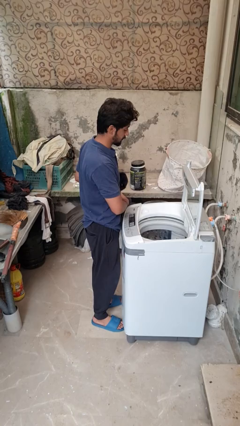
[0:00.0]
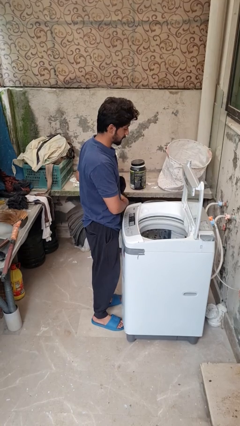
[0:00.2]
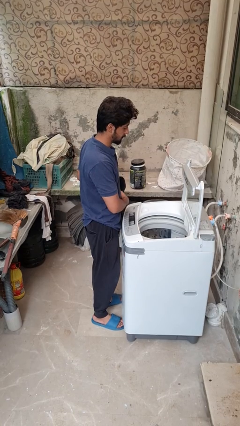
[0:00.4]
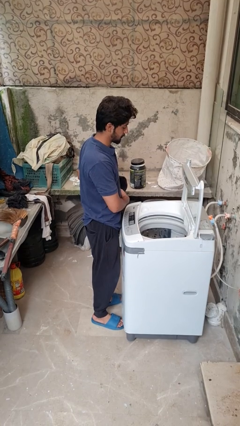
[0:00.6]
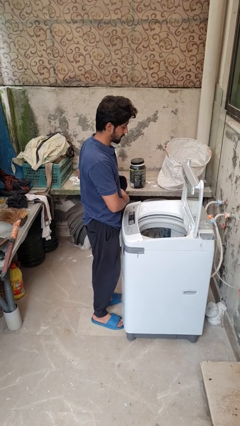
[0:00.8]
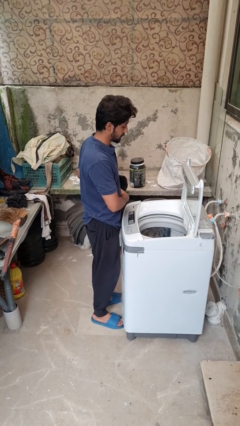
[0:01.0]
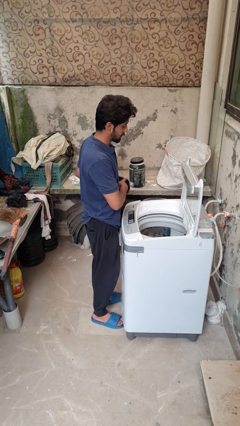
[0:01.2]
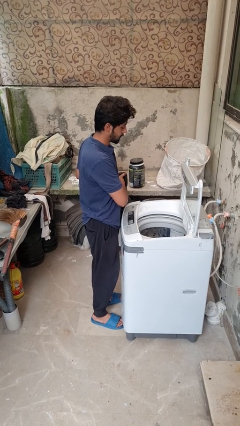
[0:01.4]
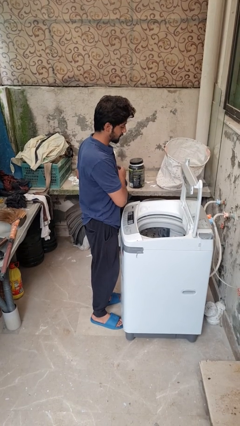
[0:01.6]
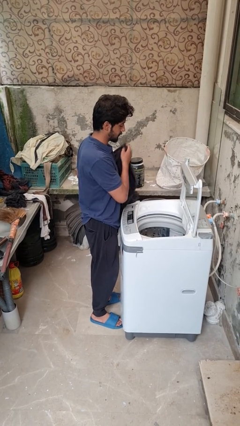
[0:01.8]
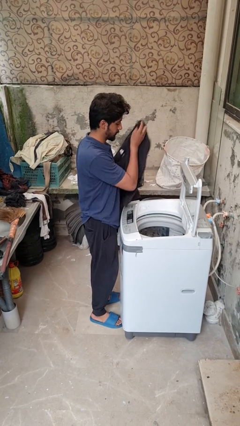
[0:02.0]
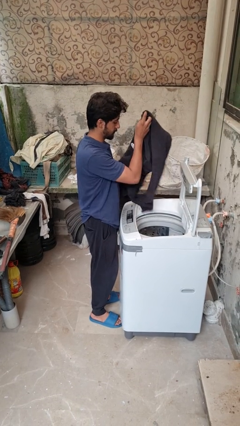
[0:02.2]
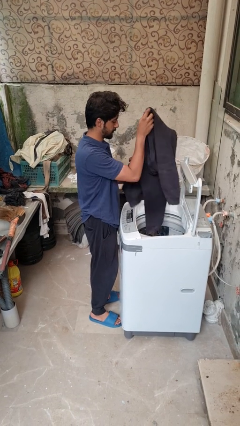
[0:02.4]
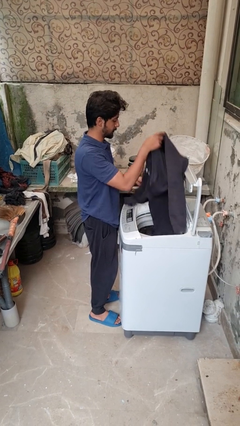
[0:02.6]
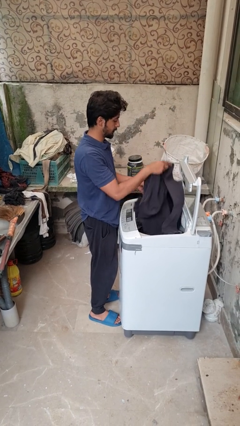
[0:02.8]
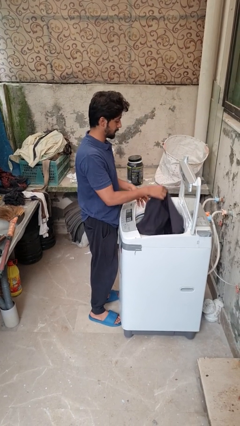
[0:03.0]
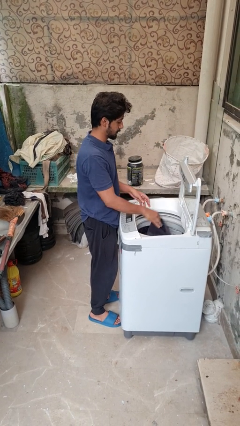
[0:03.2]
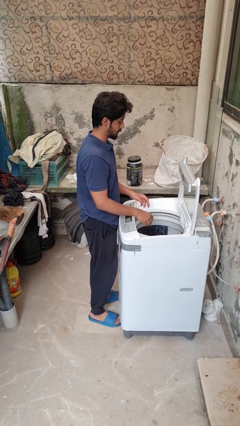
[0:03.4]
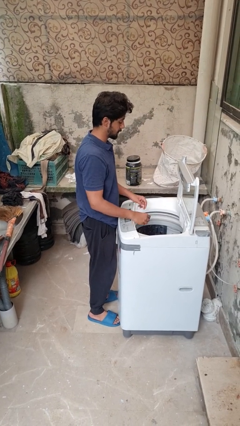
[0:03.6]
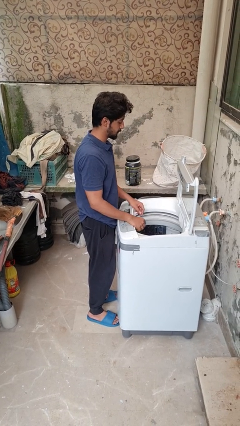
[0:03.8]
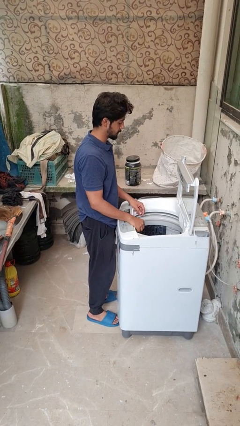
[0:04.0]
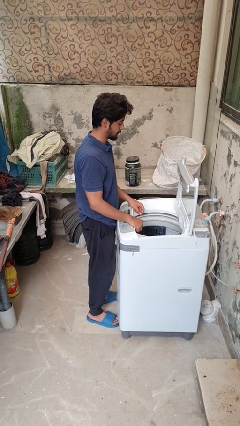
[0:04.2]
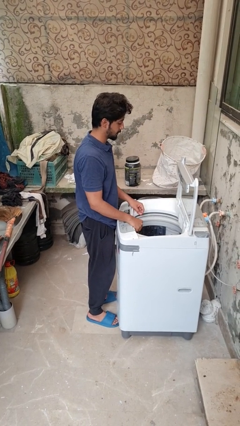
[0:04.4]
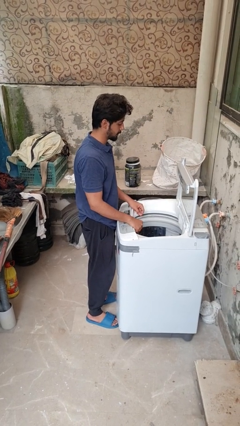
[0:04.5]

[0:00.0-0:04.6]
person loads dryer

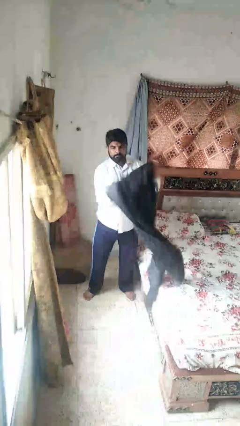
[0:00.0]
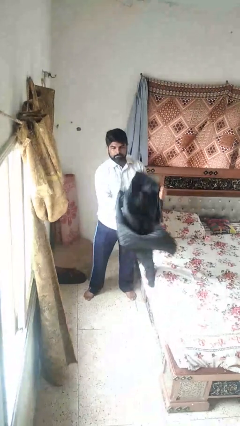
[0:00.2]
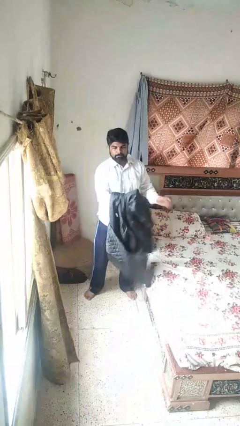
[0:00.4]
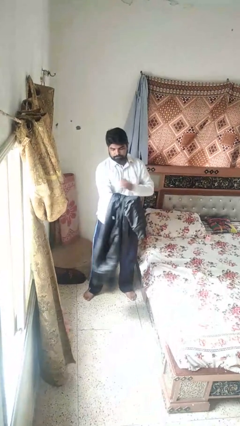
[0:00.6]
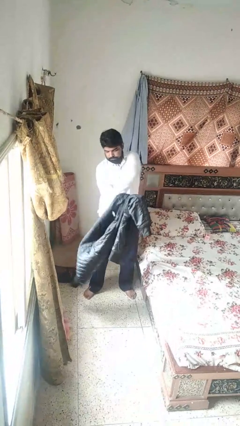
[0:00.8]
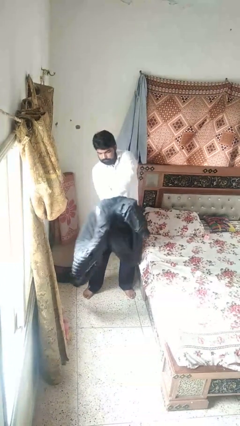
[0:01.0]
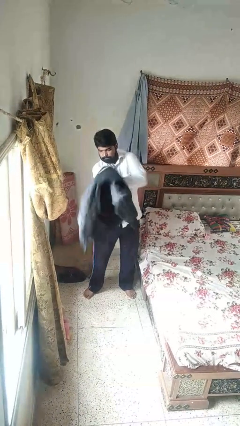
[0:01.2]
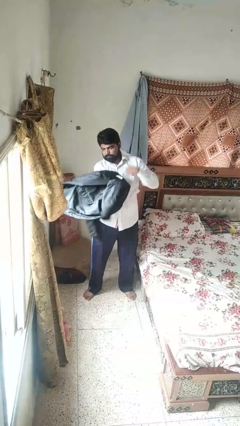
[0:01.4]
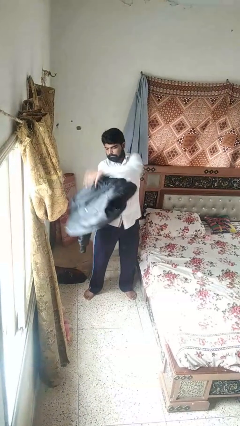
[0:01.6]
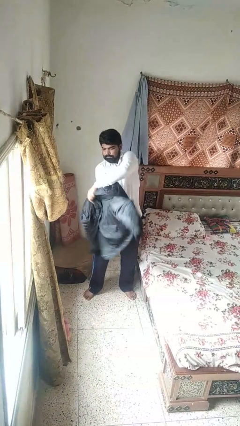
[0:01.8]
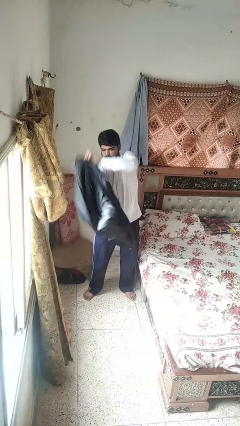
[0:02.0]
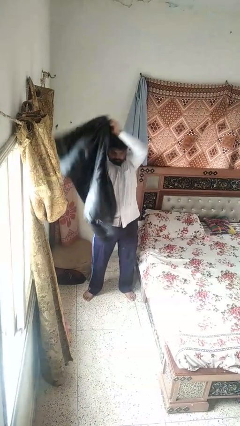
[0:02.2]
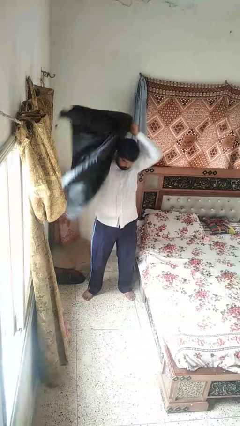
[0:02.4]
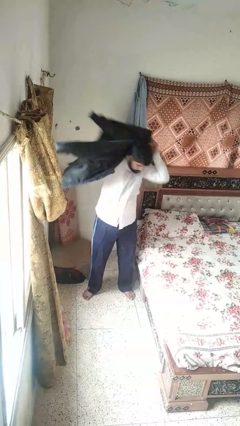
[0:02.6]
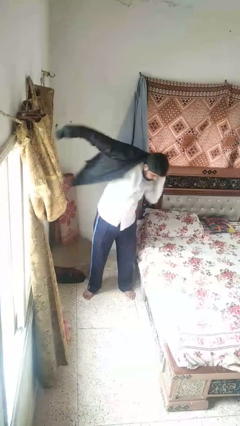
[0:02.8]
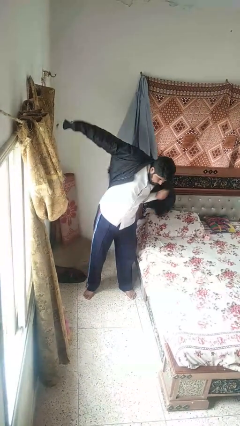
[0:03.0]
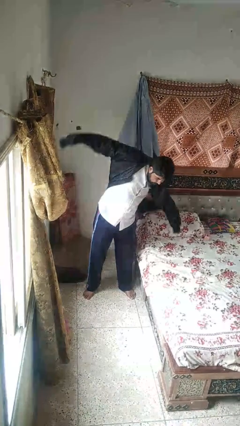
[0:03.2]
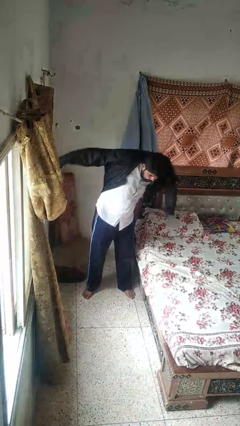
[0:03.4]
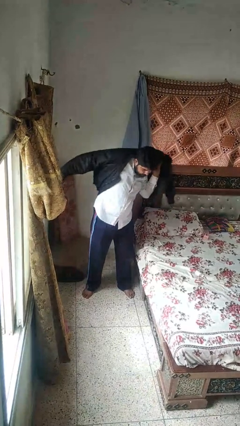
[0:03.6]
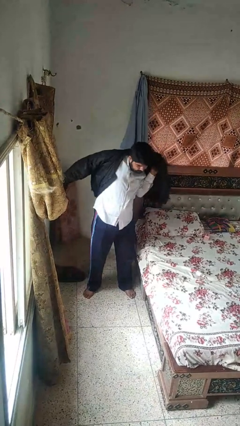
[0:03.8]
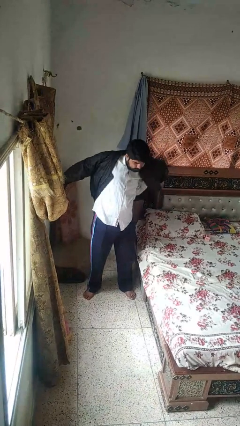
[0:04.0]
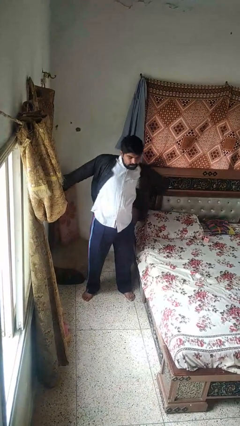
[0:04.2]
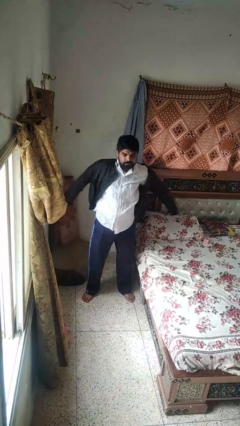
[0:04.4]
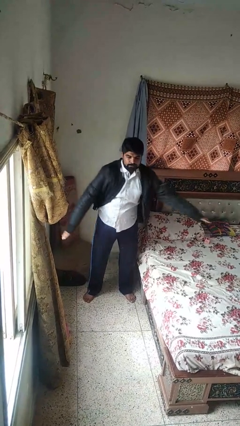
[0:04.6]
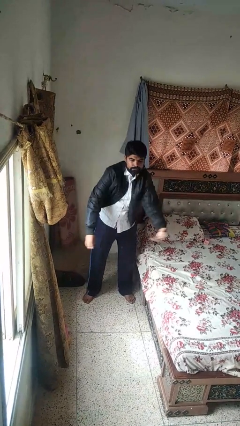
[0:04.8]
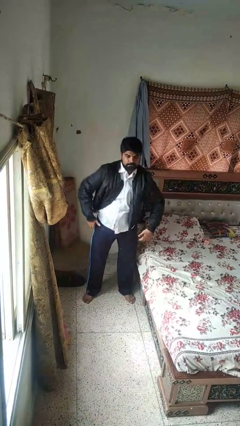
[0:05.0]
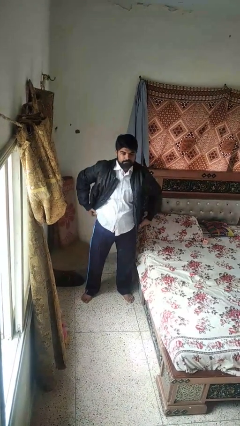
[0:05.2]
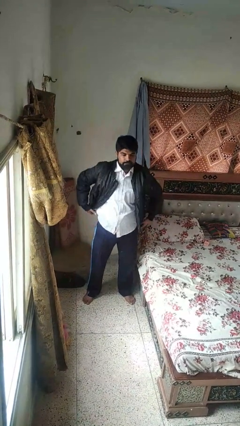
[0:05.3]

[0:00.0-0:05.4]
person puts on jacket

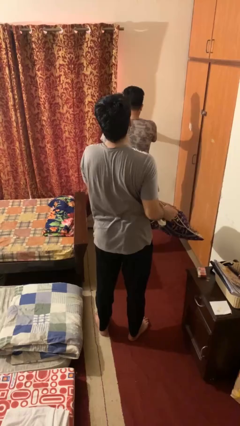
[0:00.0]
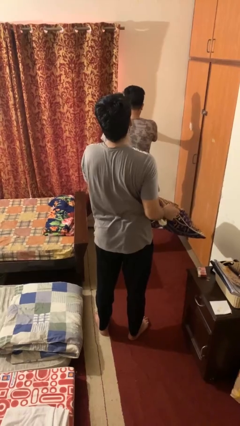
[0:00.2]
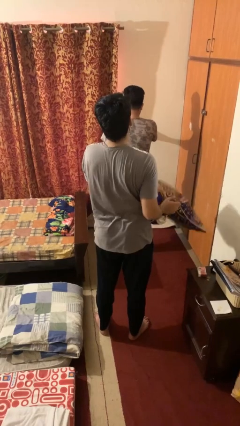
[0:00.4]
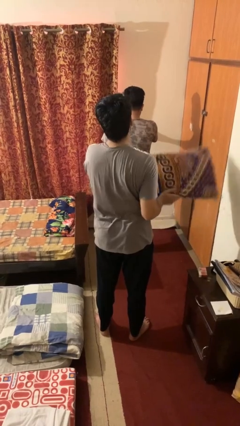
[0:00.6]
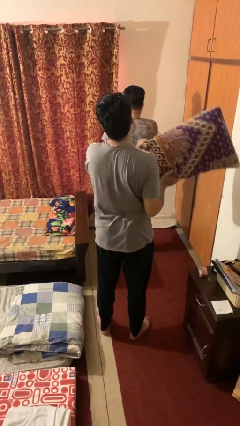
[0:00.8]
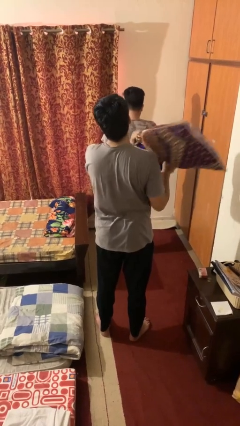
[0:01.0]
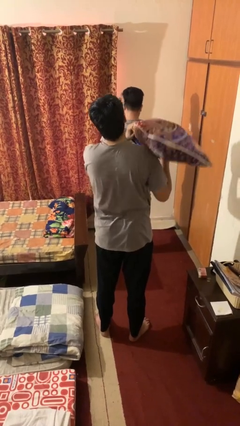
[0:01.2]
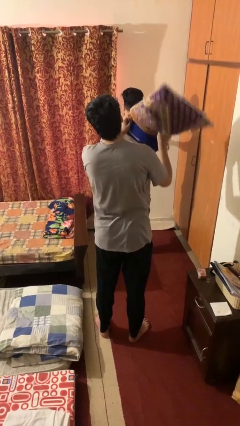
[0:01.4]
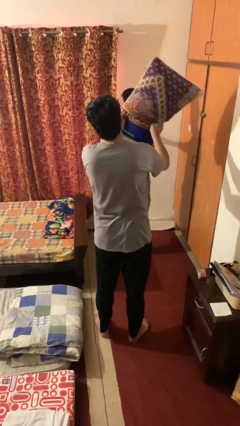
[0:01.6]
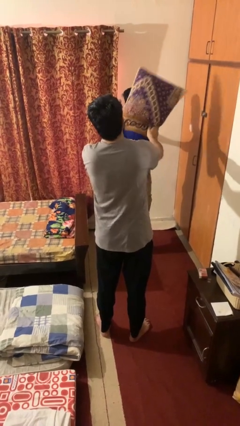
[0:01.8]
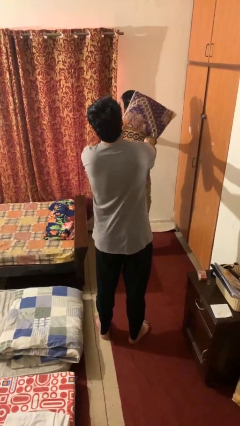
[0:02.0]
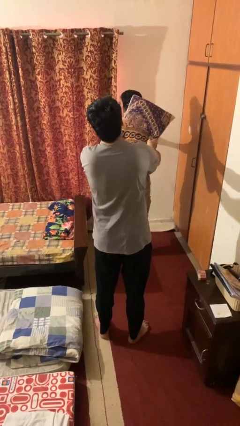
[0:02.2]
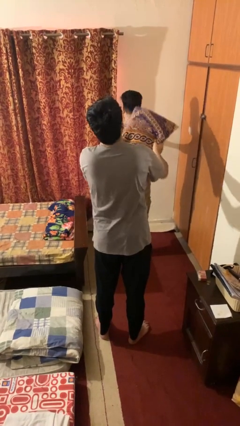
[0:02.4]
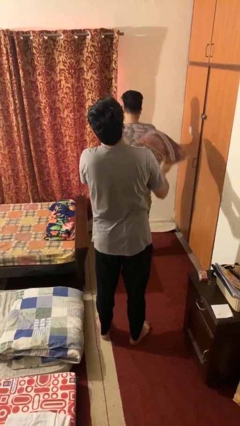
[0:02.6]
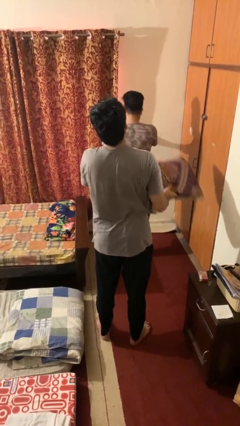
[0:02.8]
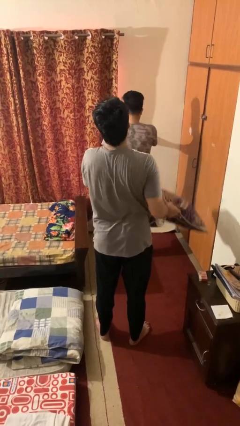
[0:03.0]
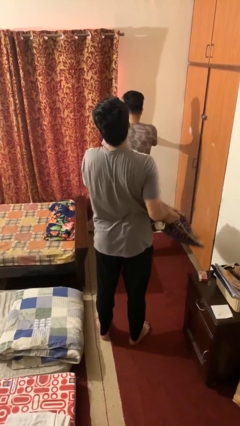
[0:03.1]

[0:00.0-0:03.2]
person hits person with pillow

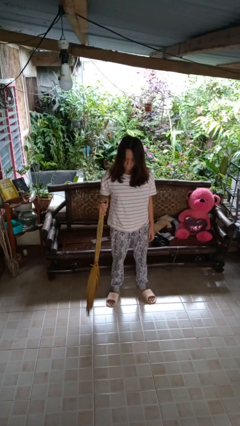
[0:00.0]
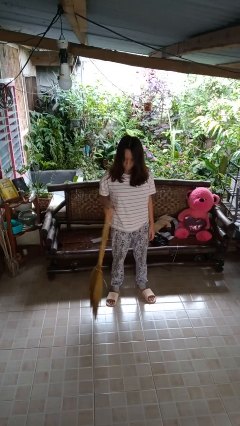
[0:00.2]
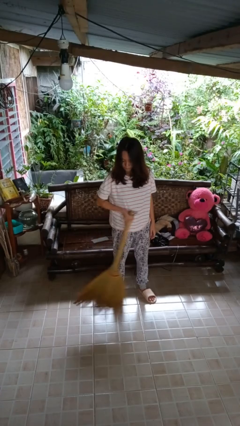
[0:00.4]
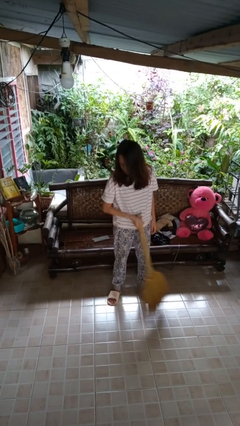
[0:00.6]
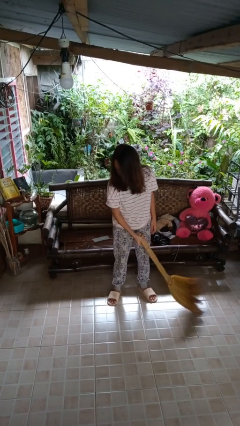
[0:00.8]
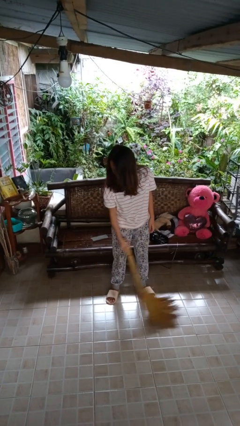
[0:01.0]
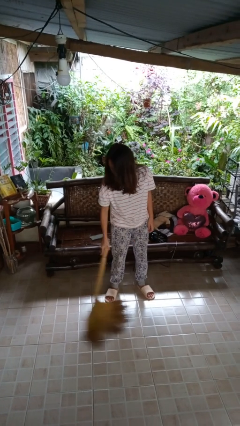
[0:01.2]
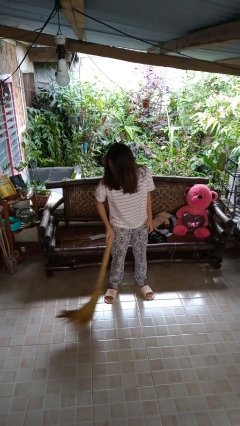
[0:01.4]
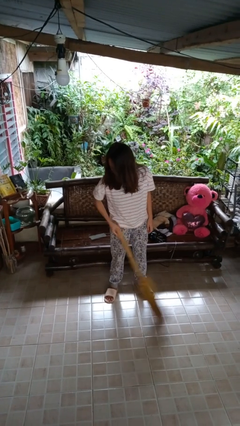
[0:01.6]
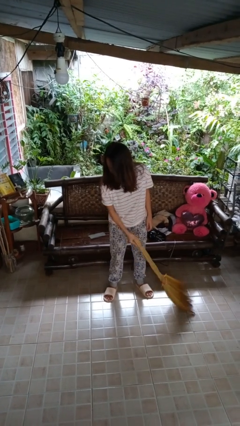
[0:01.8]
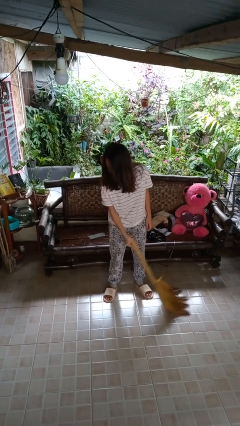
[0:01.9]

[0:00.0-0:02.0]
person sweeps floor

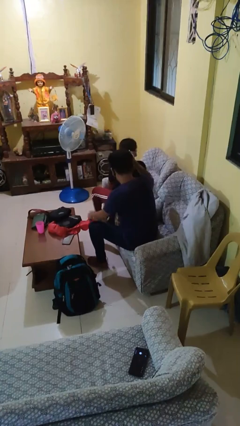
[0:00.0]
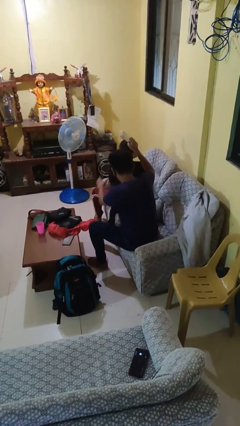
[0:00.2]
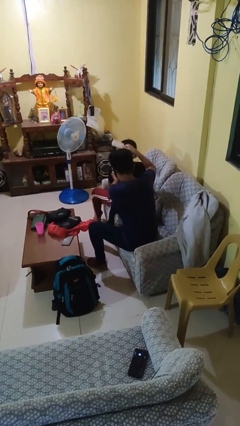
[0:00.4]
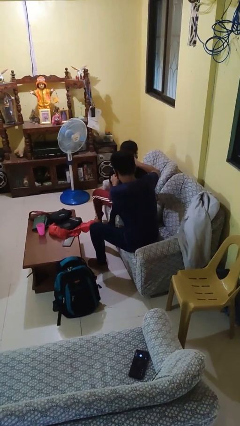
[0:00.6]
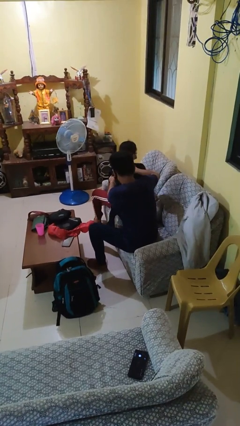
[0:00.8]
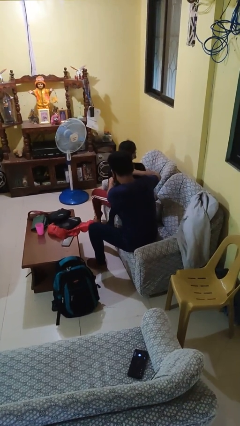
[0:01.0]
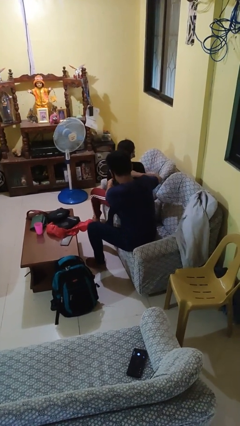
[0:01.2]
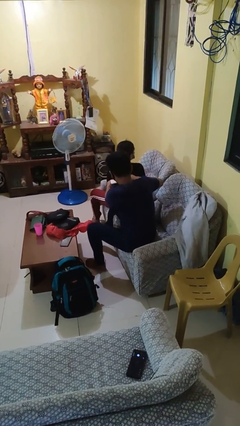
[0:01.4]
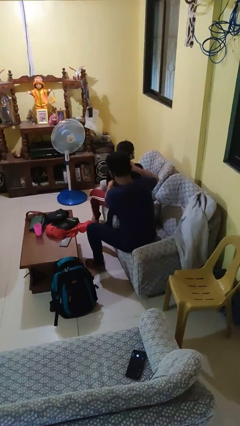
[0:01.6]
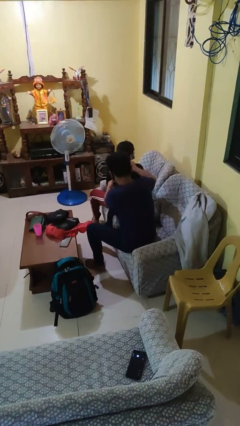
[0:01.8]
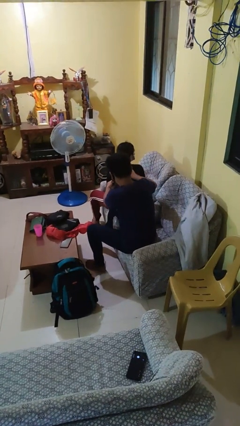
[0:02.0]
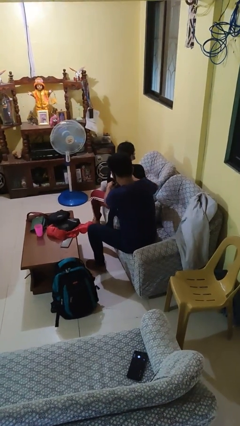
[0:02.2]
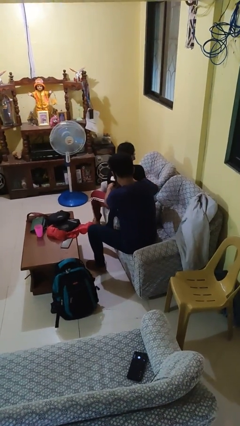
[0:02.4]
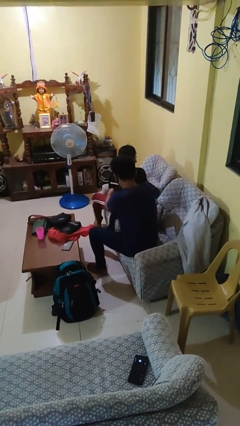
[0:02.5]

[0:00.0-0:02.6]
person brushes hair of person

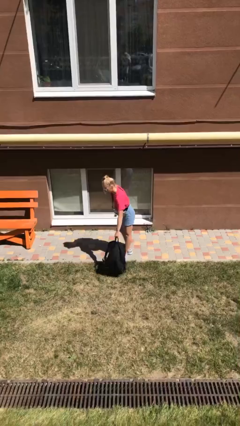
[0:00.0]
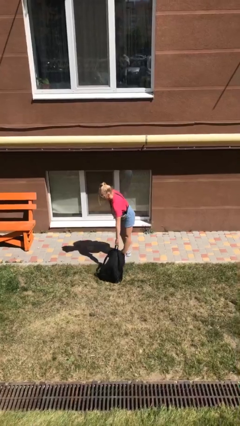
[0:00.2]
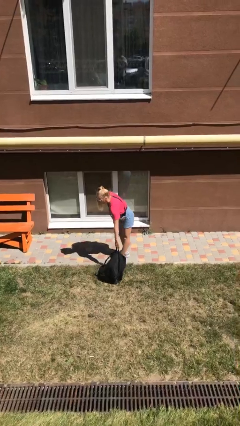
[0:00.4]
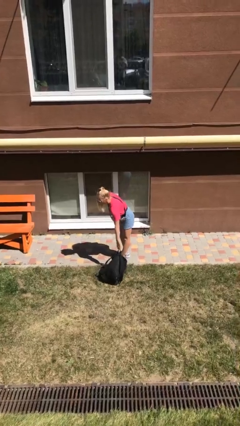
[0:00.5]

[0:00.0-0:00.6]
person puts down object on floor
